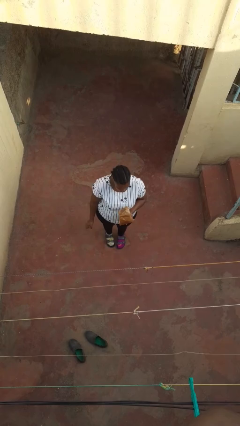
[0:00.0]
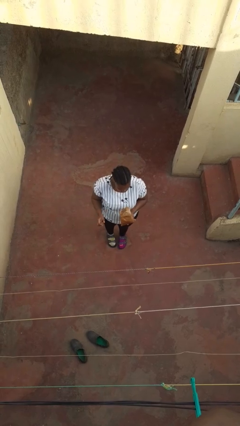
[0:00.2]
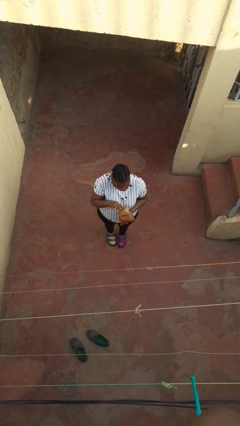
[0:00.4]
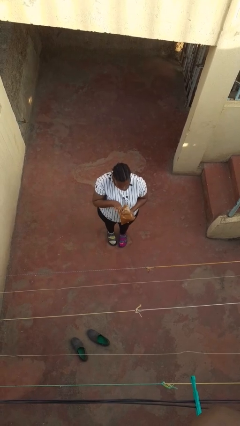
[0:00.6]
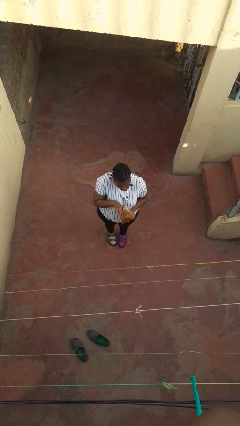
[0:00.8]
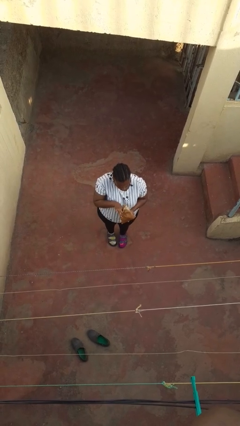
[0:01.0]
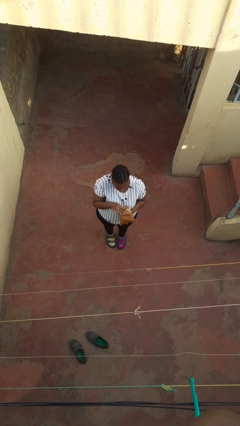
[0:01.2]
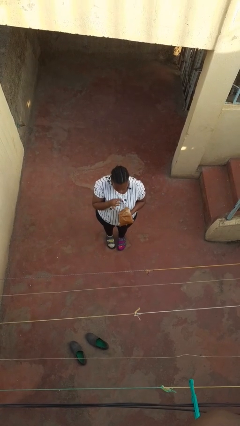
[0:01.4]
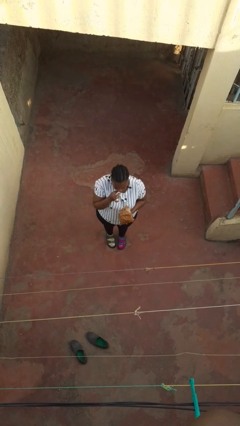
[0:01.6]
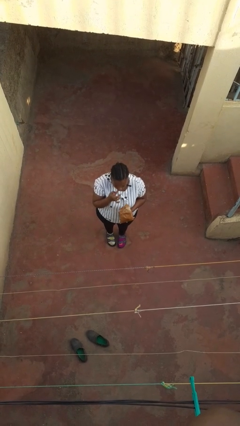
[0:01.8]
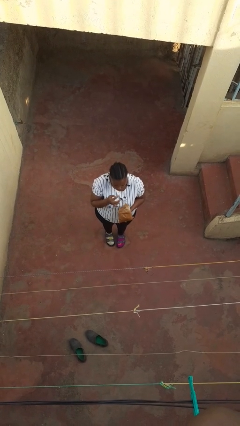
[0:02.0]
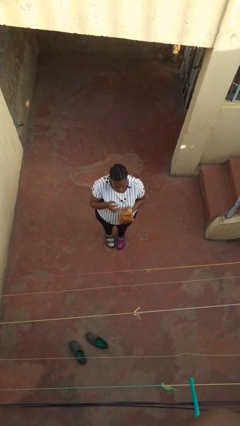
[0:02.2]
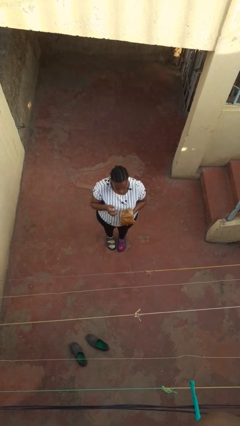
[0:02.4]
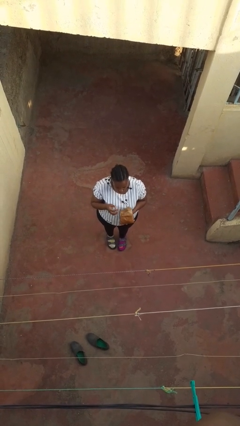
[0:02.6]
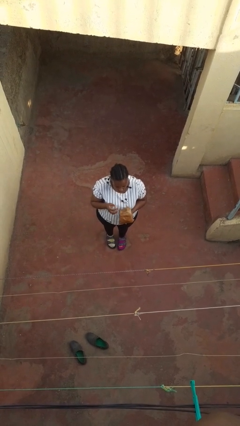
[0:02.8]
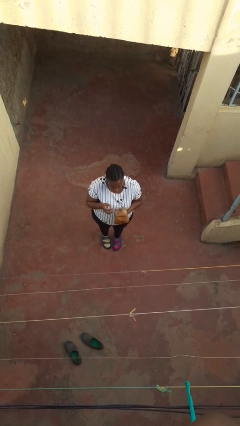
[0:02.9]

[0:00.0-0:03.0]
person eats snack from bag

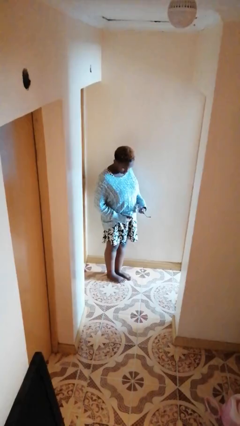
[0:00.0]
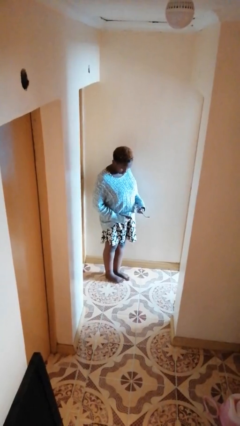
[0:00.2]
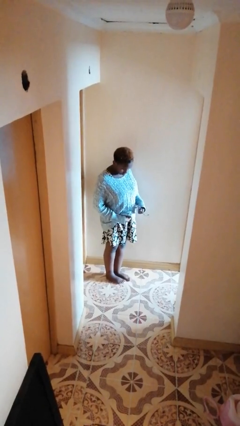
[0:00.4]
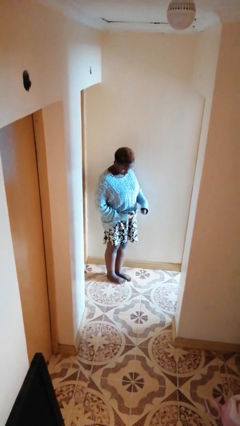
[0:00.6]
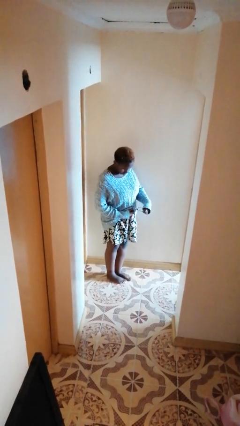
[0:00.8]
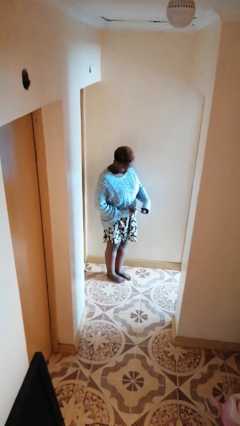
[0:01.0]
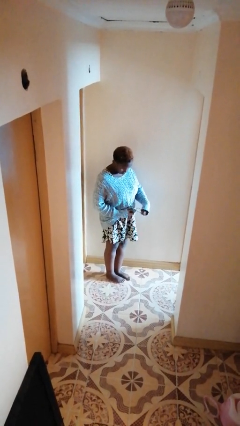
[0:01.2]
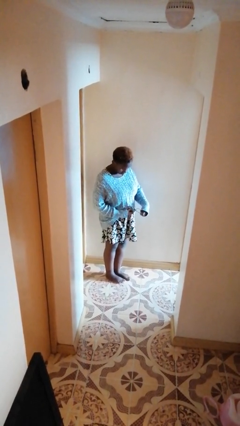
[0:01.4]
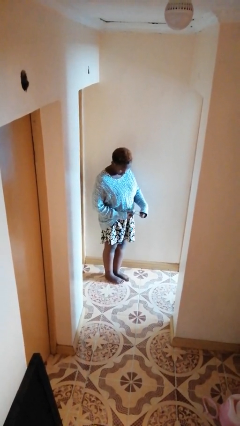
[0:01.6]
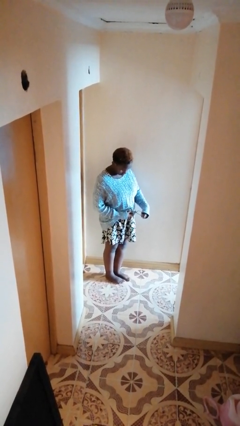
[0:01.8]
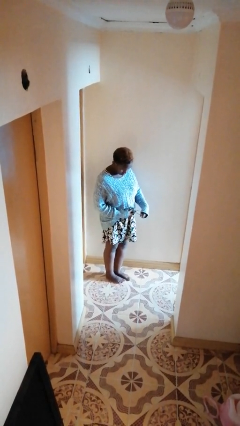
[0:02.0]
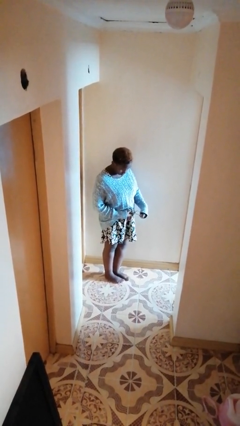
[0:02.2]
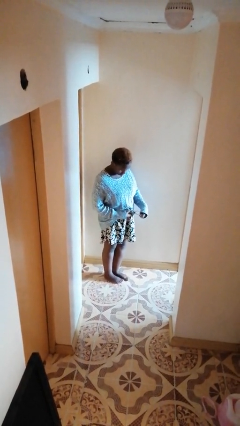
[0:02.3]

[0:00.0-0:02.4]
person cleans eyeglasses

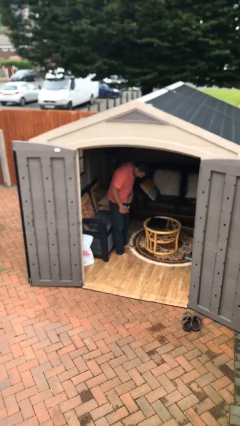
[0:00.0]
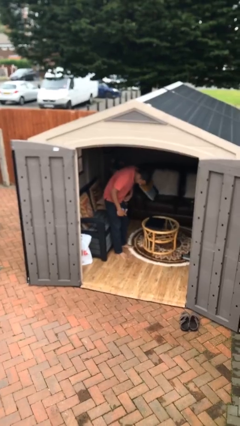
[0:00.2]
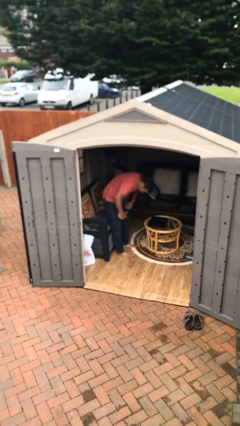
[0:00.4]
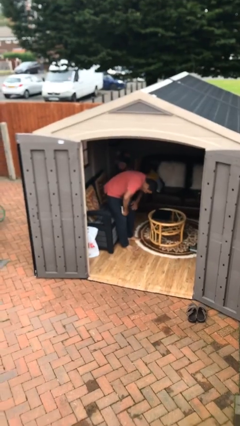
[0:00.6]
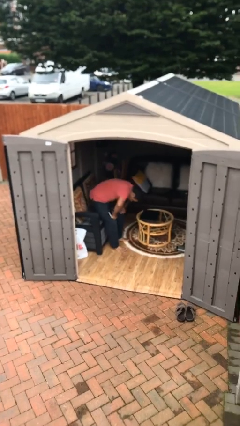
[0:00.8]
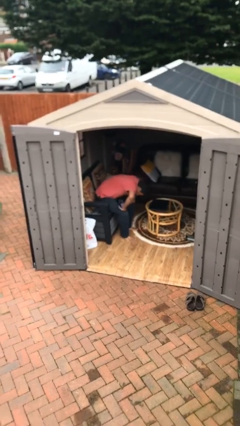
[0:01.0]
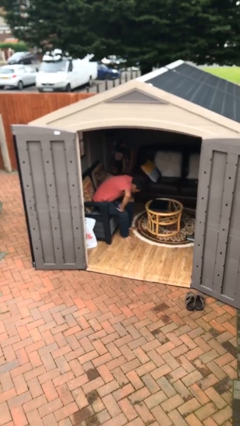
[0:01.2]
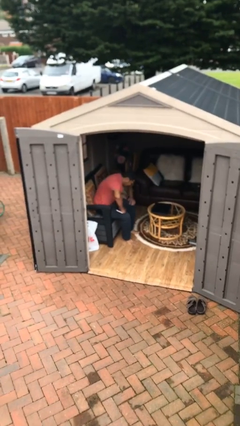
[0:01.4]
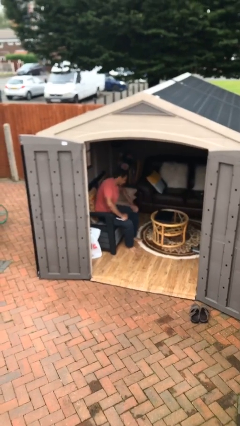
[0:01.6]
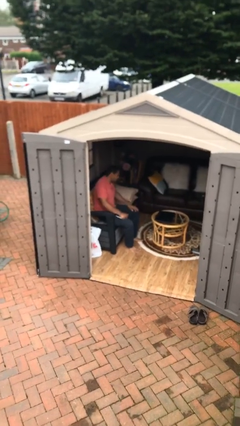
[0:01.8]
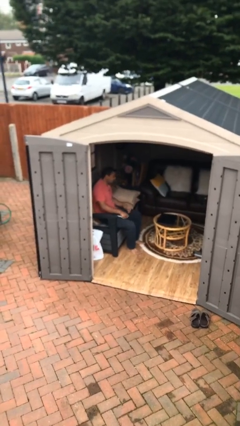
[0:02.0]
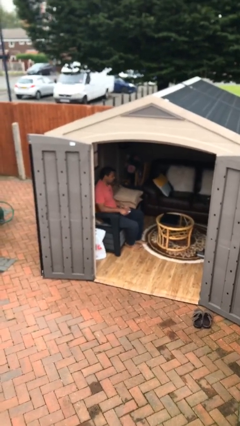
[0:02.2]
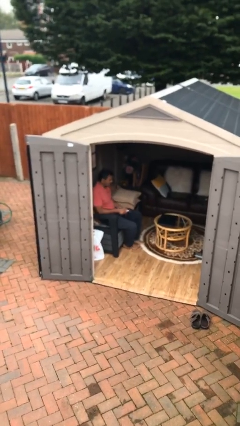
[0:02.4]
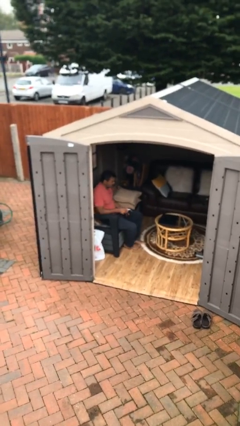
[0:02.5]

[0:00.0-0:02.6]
person sits down

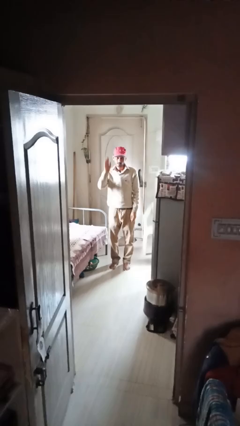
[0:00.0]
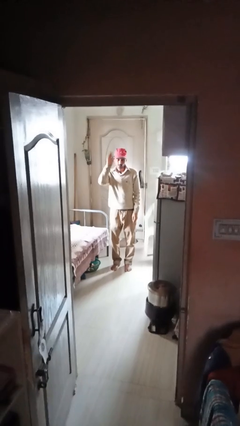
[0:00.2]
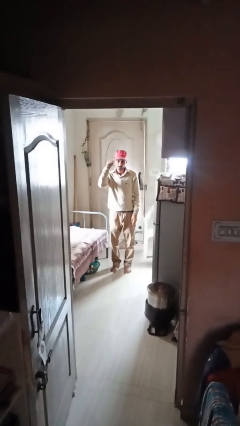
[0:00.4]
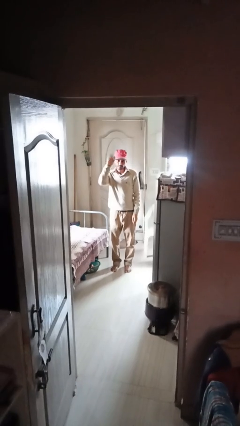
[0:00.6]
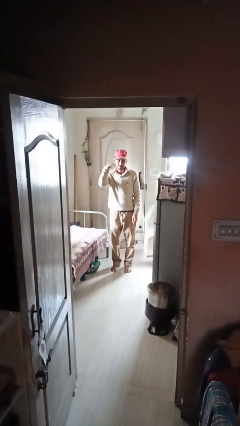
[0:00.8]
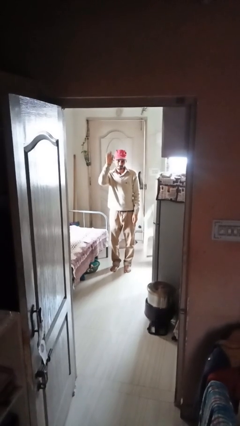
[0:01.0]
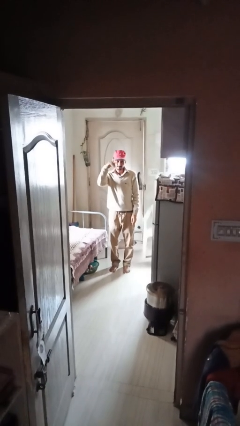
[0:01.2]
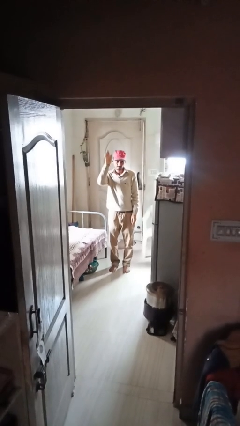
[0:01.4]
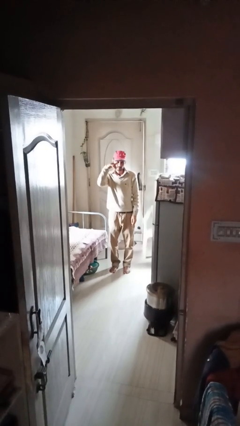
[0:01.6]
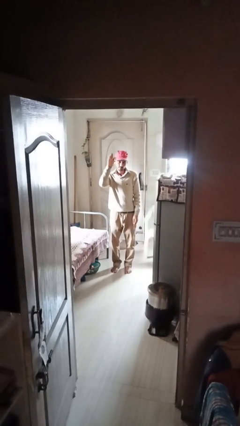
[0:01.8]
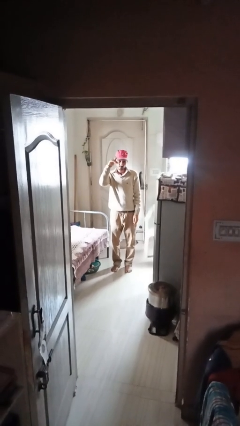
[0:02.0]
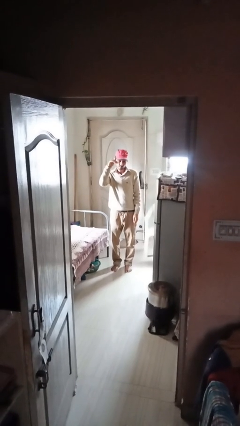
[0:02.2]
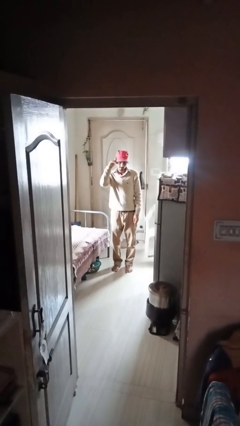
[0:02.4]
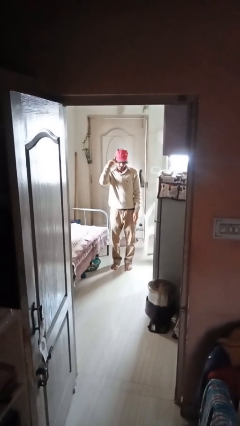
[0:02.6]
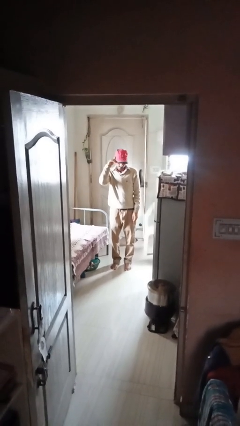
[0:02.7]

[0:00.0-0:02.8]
person gestures come here

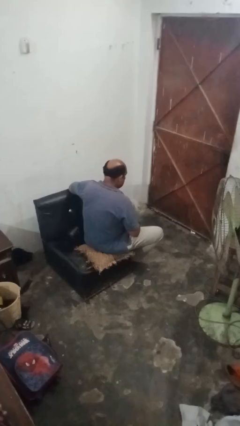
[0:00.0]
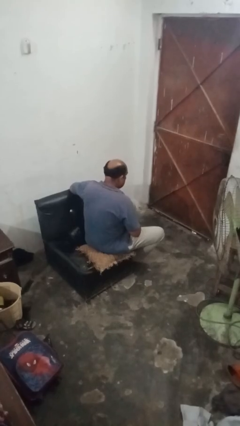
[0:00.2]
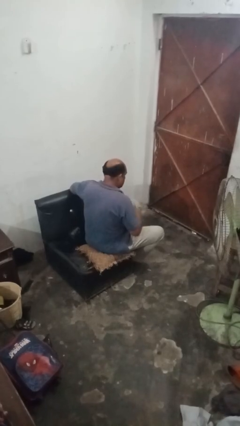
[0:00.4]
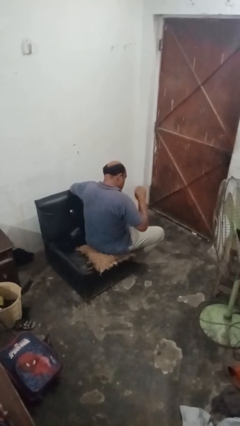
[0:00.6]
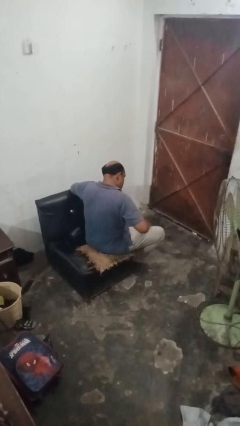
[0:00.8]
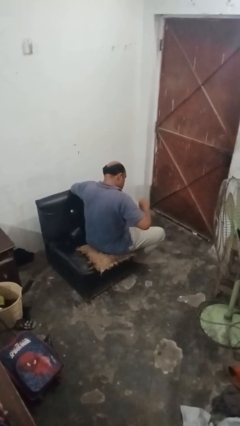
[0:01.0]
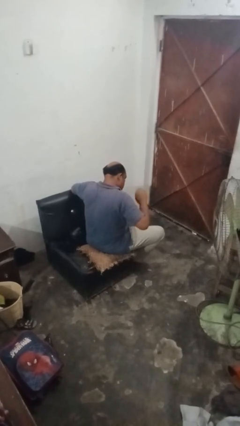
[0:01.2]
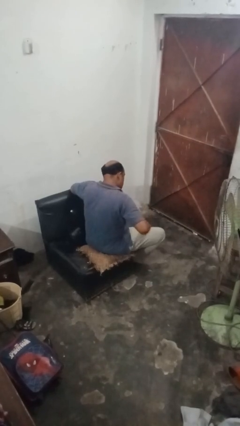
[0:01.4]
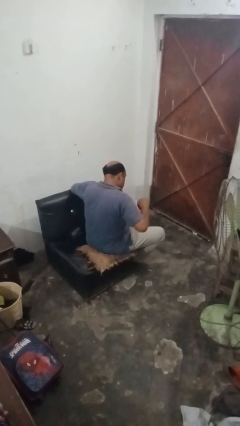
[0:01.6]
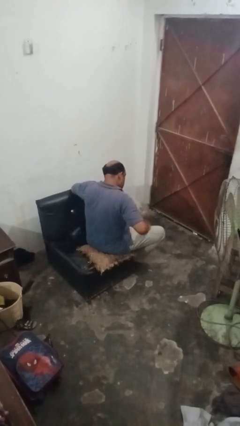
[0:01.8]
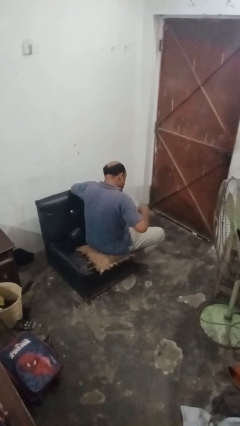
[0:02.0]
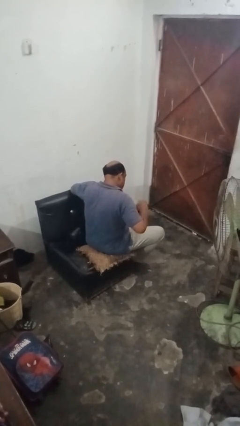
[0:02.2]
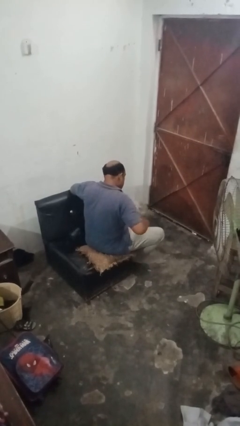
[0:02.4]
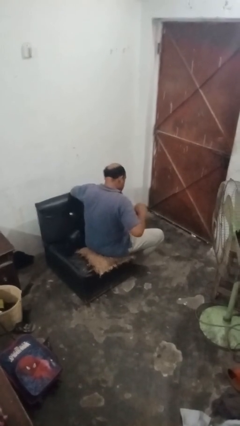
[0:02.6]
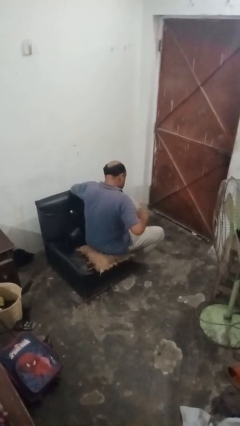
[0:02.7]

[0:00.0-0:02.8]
person slaps hands on thighs

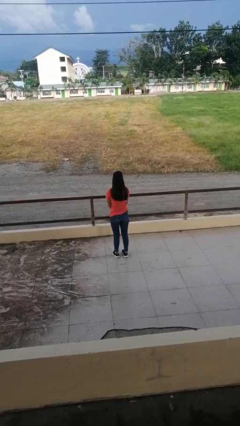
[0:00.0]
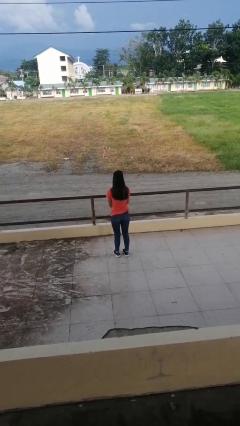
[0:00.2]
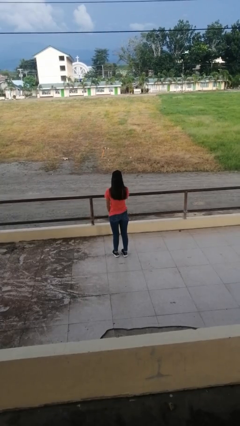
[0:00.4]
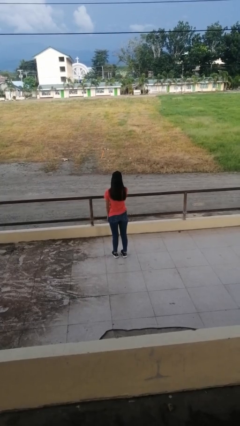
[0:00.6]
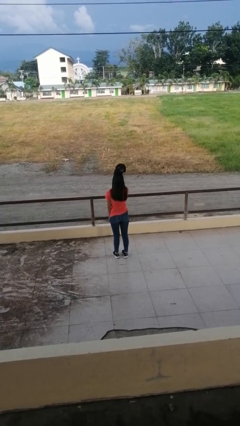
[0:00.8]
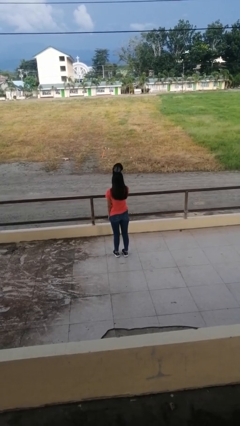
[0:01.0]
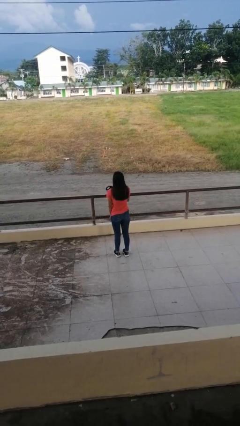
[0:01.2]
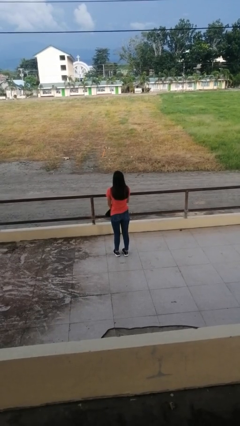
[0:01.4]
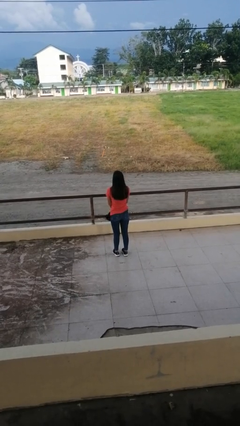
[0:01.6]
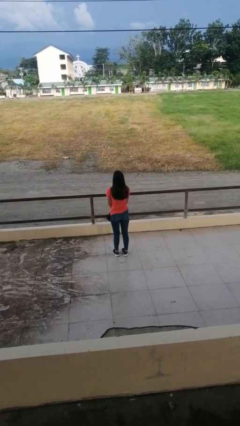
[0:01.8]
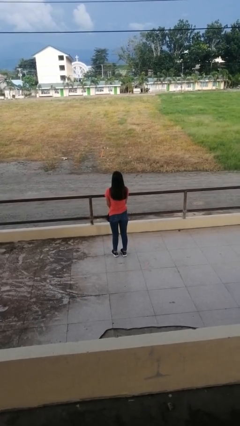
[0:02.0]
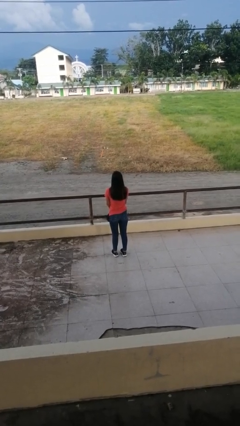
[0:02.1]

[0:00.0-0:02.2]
person takes off hat

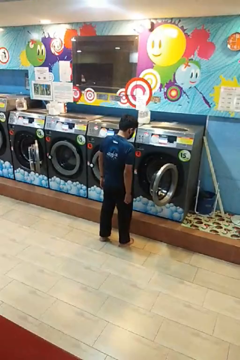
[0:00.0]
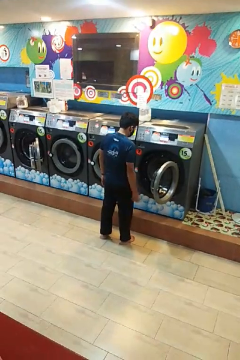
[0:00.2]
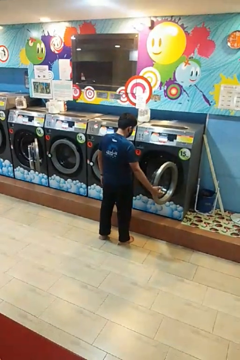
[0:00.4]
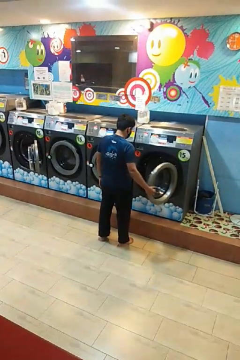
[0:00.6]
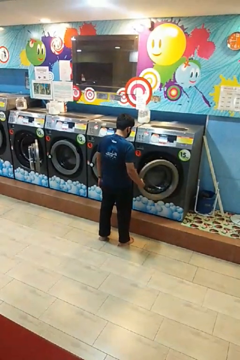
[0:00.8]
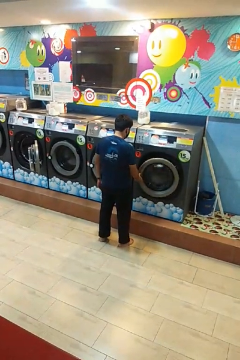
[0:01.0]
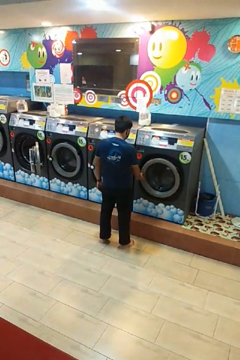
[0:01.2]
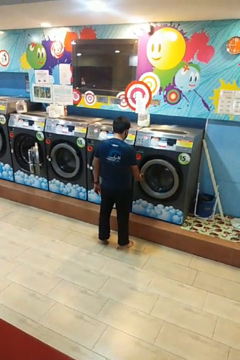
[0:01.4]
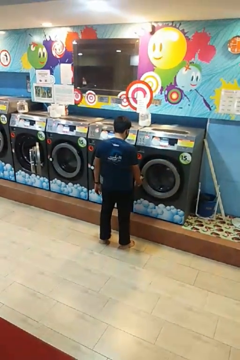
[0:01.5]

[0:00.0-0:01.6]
person closes clothes washer

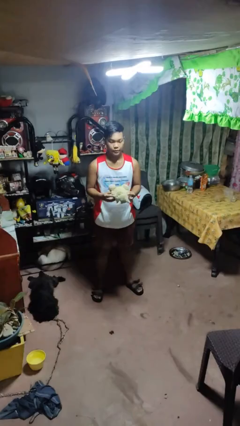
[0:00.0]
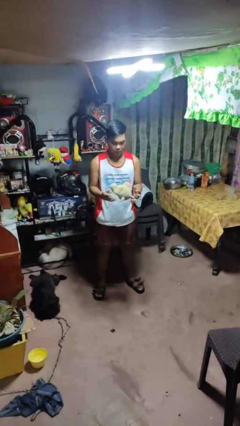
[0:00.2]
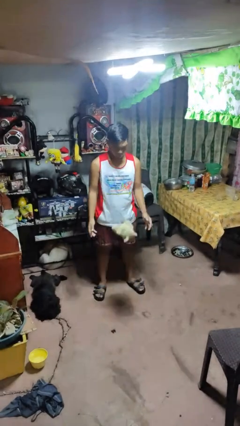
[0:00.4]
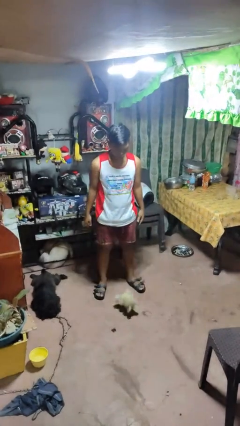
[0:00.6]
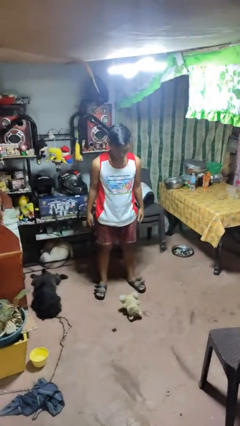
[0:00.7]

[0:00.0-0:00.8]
person drops object
